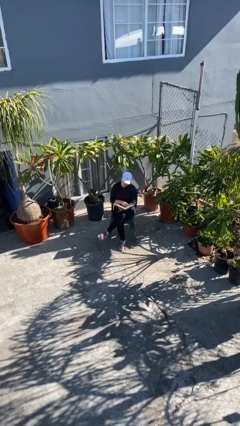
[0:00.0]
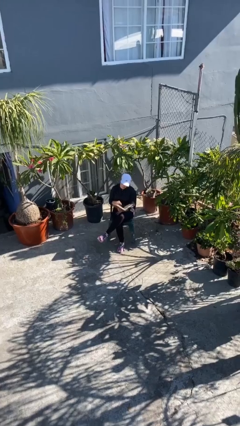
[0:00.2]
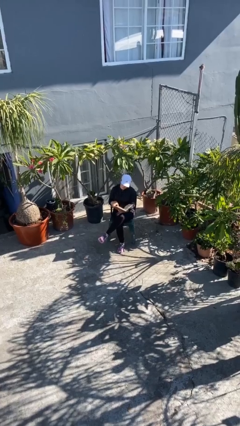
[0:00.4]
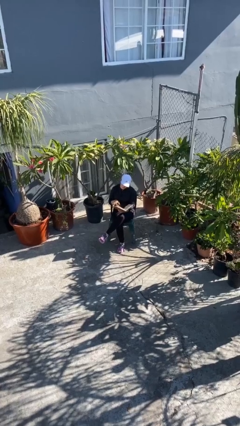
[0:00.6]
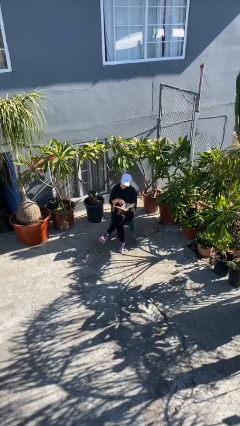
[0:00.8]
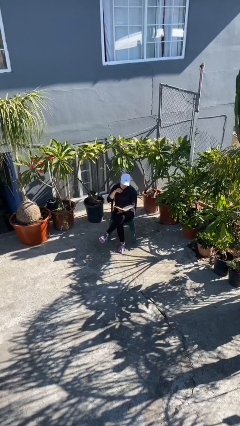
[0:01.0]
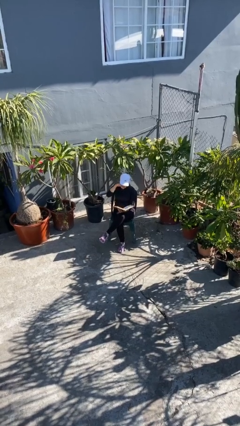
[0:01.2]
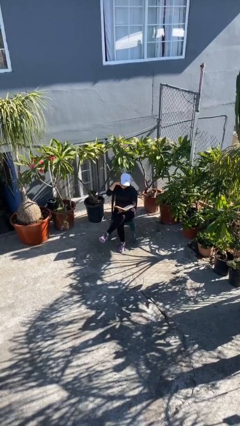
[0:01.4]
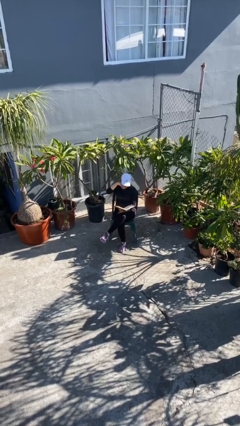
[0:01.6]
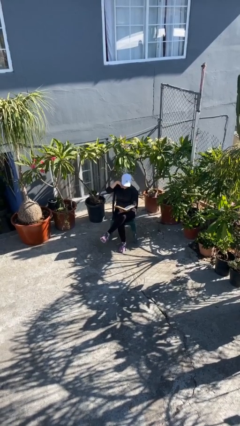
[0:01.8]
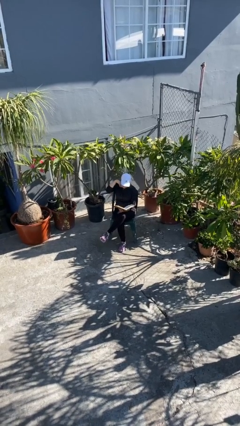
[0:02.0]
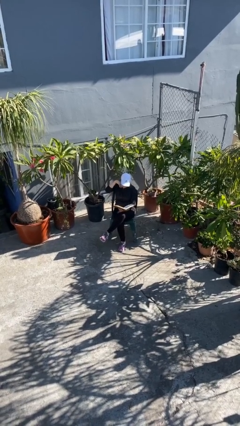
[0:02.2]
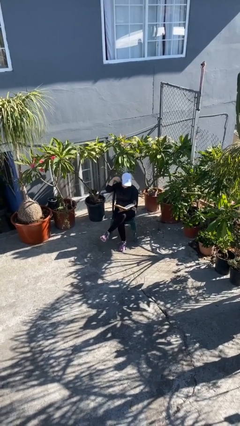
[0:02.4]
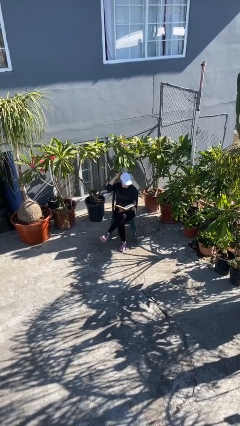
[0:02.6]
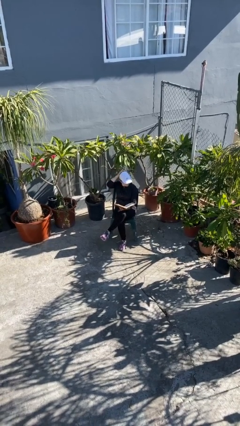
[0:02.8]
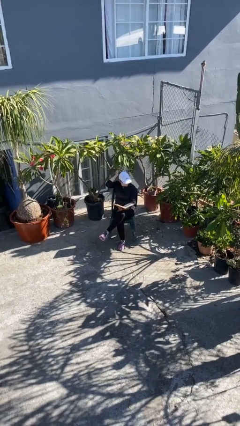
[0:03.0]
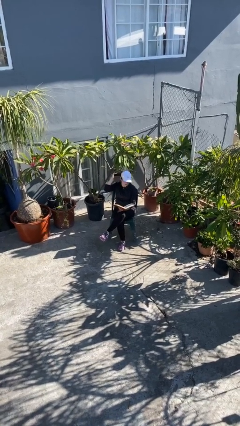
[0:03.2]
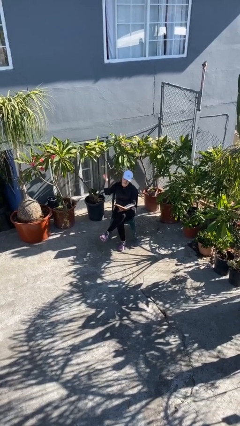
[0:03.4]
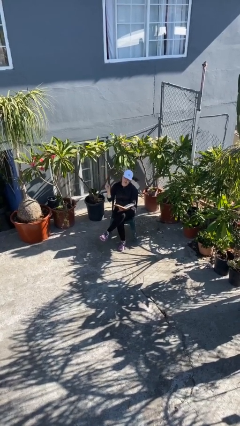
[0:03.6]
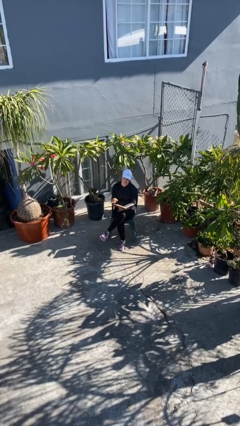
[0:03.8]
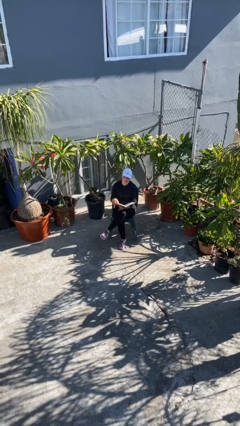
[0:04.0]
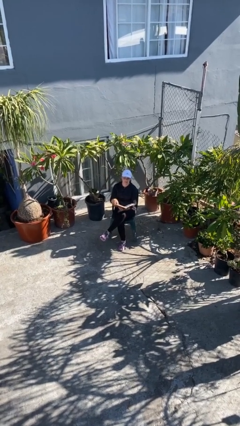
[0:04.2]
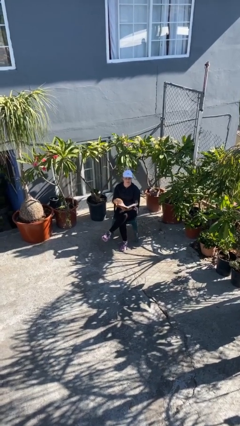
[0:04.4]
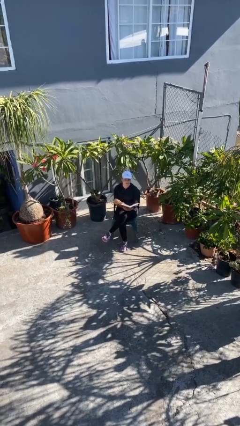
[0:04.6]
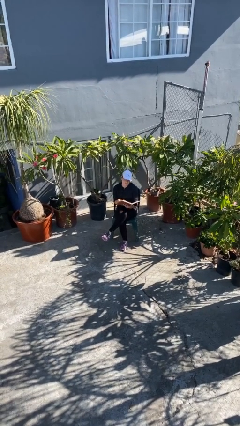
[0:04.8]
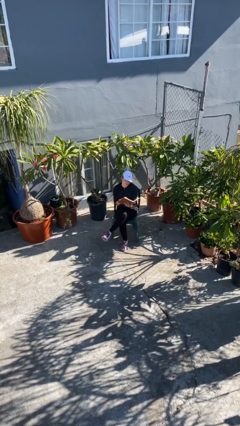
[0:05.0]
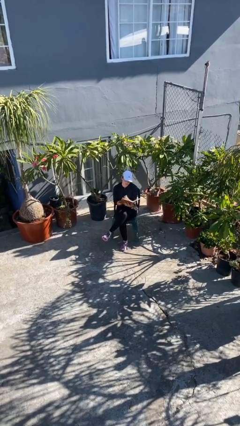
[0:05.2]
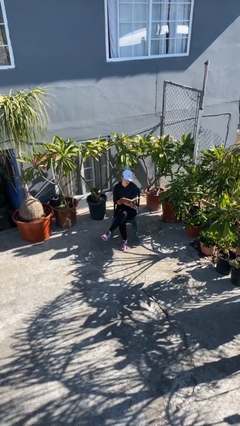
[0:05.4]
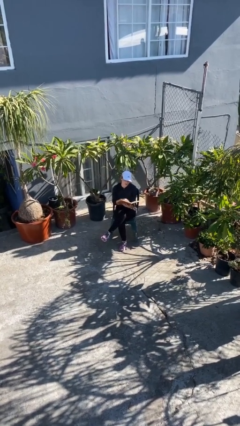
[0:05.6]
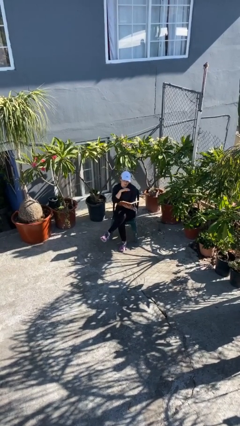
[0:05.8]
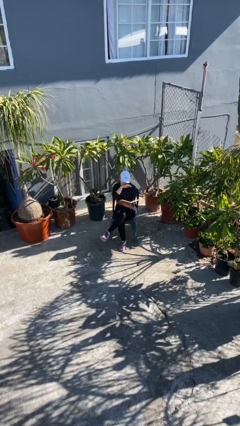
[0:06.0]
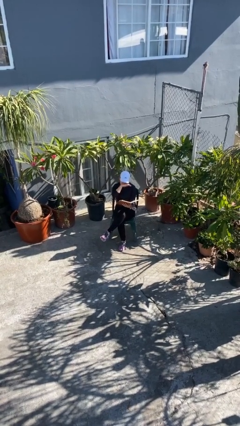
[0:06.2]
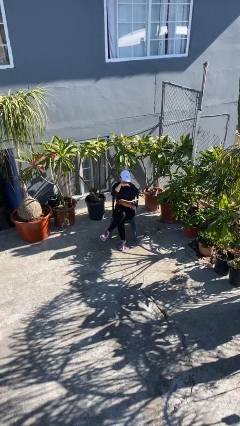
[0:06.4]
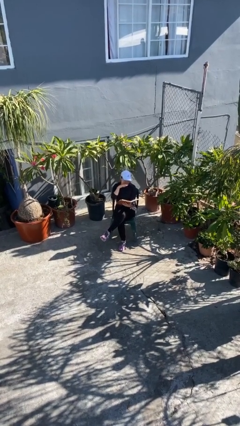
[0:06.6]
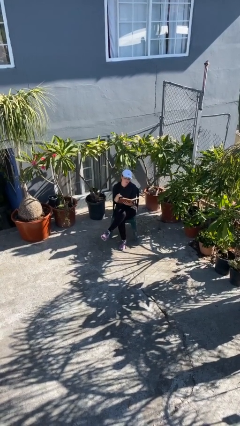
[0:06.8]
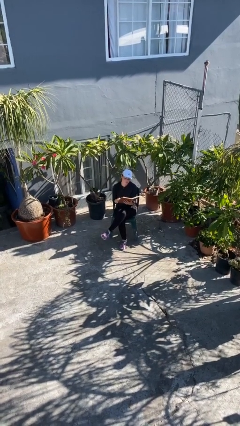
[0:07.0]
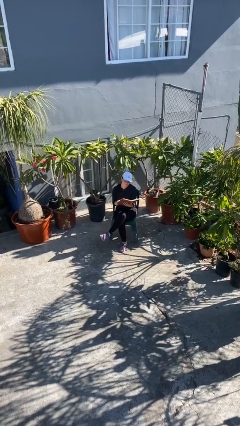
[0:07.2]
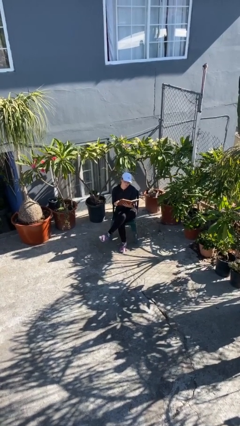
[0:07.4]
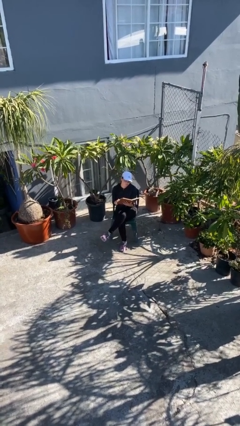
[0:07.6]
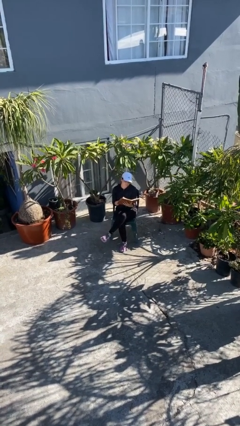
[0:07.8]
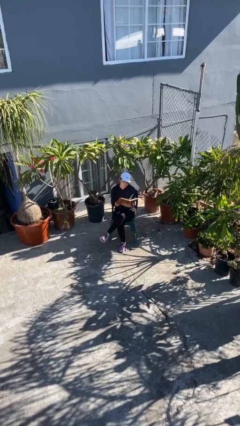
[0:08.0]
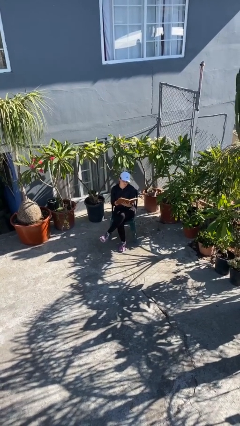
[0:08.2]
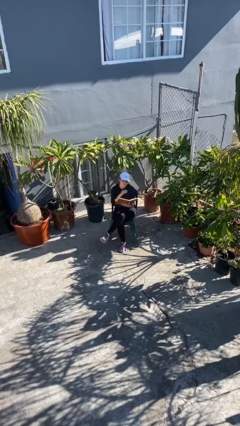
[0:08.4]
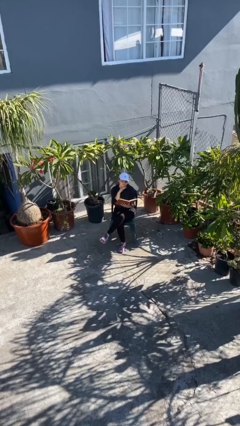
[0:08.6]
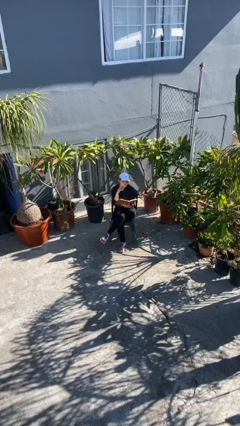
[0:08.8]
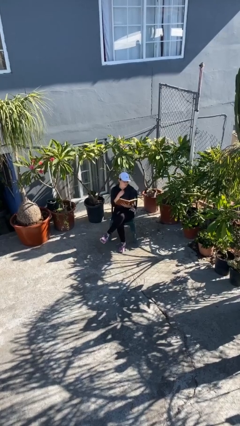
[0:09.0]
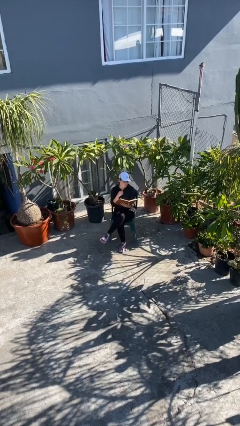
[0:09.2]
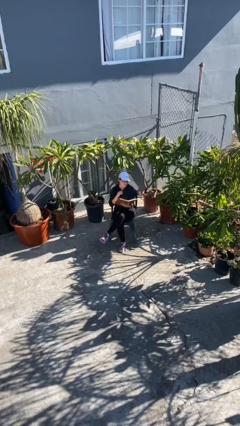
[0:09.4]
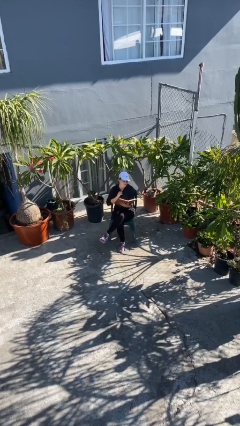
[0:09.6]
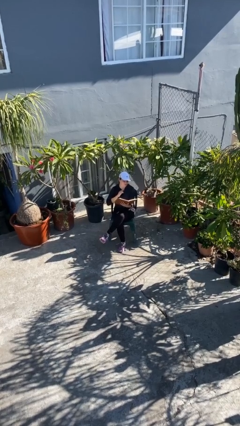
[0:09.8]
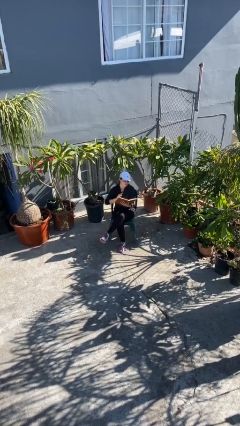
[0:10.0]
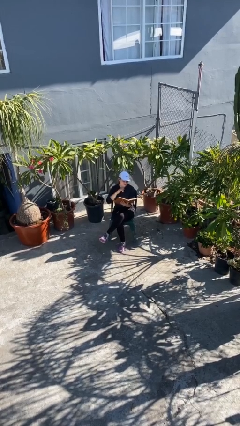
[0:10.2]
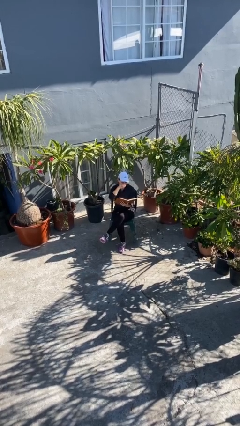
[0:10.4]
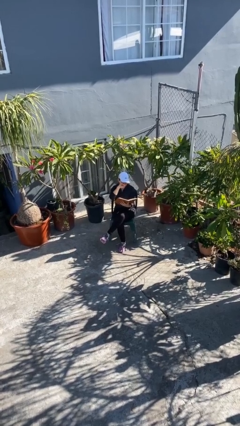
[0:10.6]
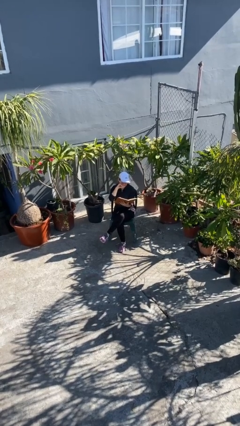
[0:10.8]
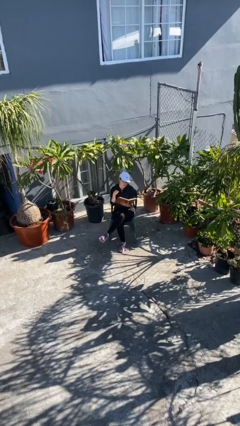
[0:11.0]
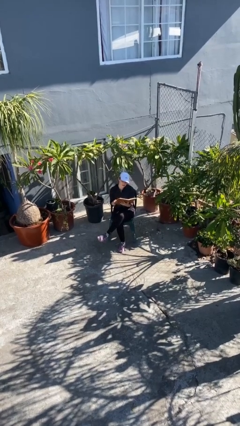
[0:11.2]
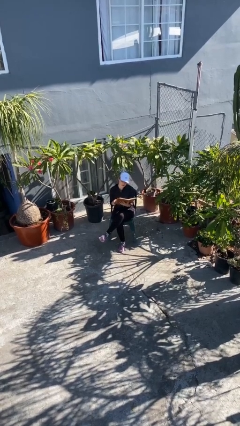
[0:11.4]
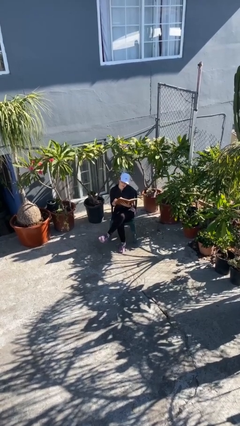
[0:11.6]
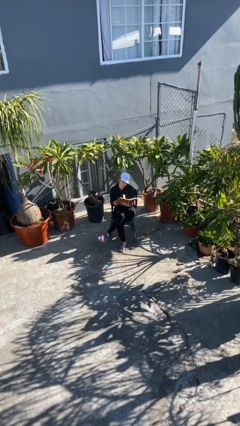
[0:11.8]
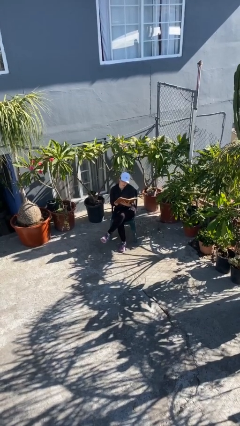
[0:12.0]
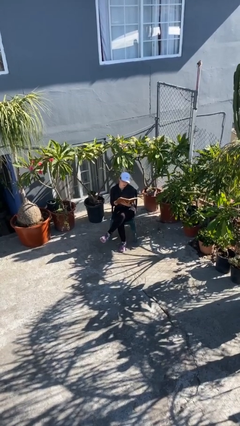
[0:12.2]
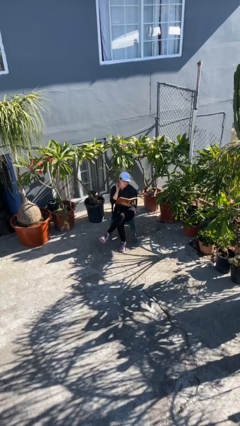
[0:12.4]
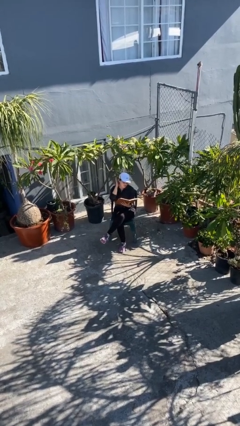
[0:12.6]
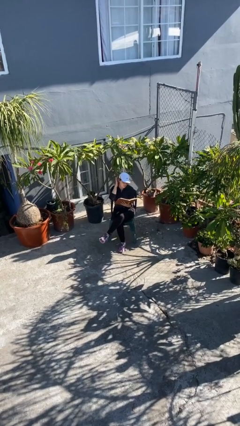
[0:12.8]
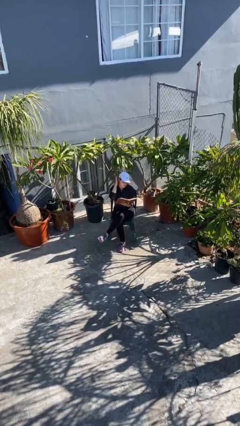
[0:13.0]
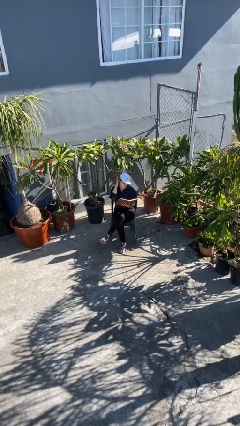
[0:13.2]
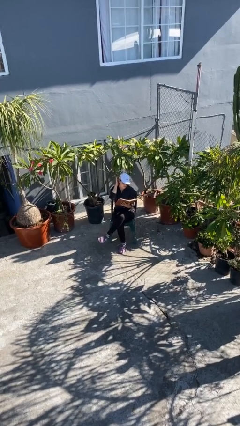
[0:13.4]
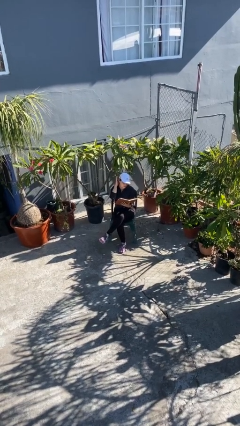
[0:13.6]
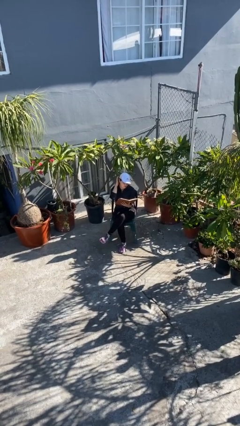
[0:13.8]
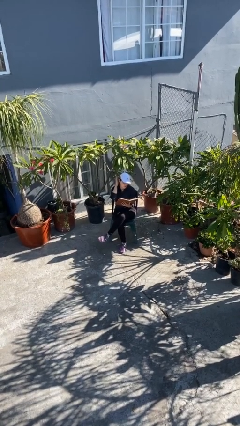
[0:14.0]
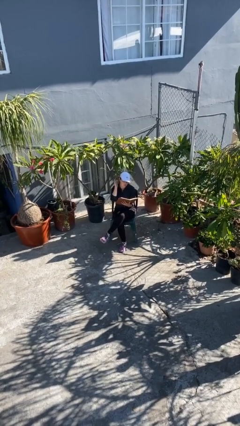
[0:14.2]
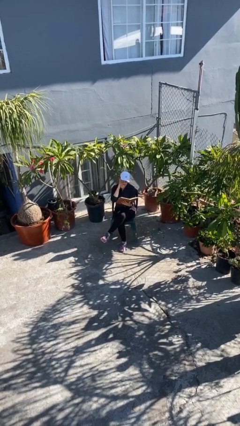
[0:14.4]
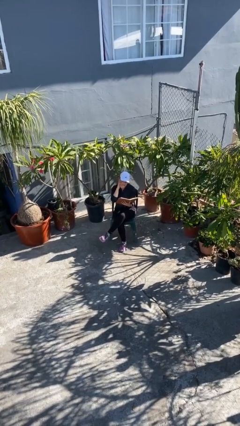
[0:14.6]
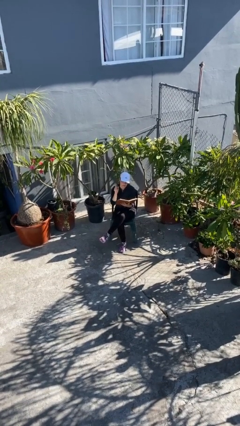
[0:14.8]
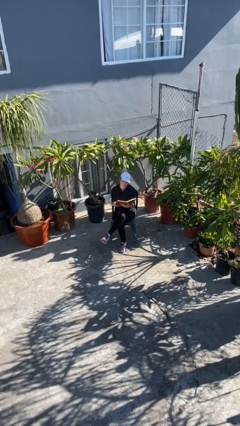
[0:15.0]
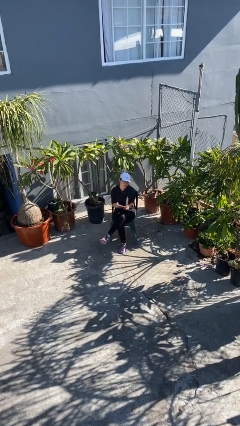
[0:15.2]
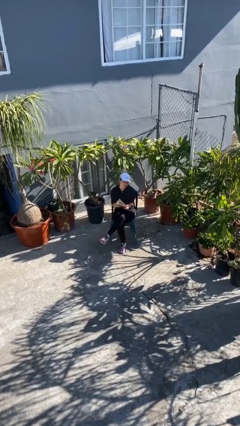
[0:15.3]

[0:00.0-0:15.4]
person reads document

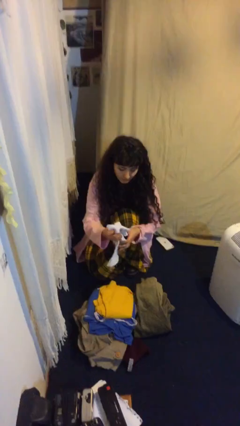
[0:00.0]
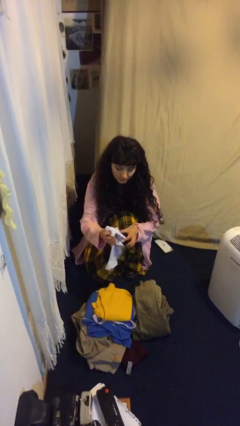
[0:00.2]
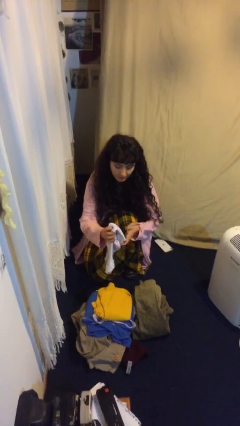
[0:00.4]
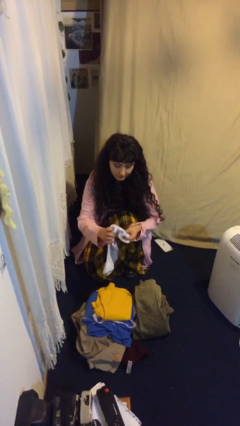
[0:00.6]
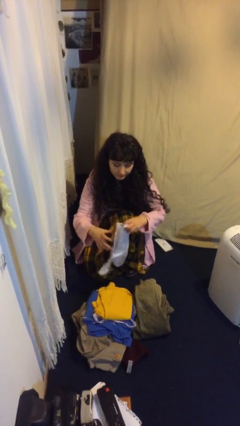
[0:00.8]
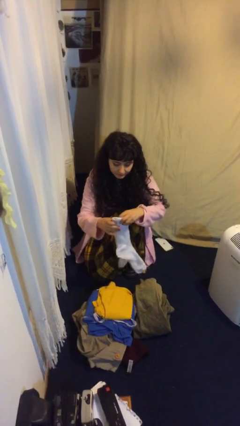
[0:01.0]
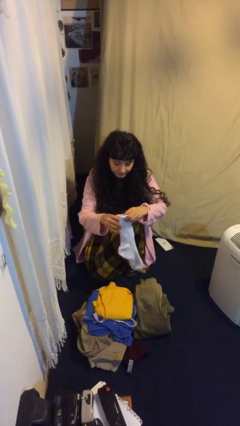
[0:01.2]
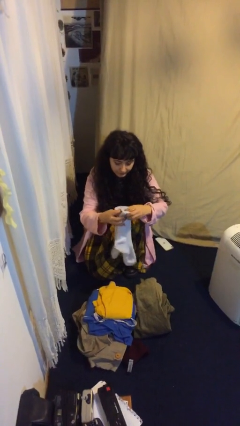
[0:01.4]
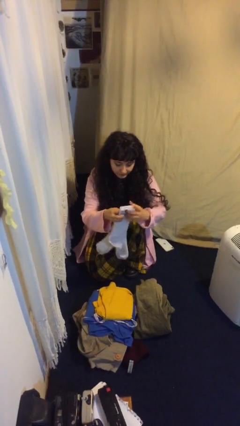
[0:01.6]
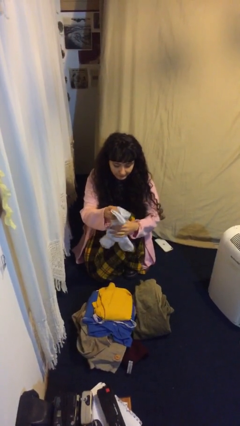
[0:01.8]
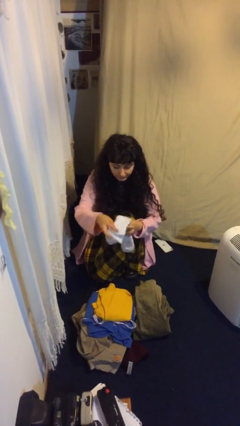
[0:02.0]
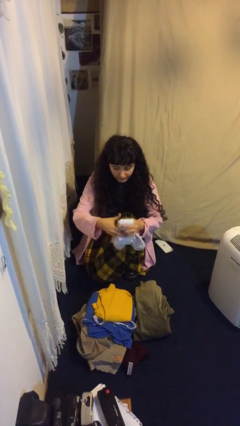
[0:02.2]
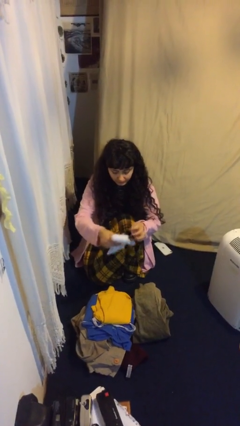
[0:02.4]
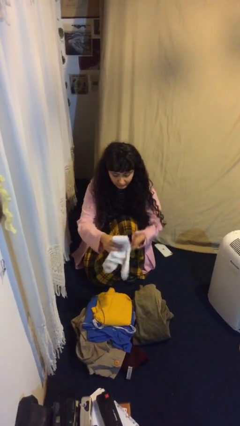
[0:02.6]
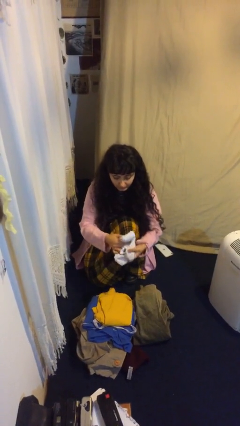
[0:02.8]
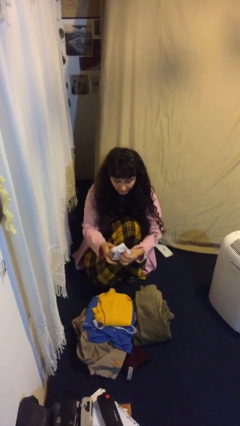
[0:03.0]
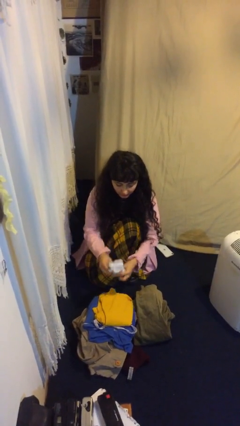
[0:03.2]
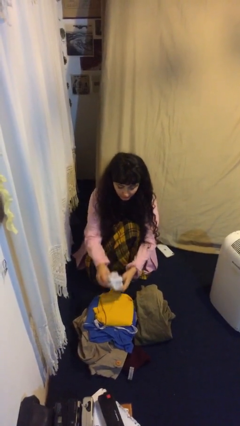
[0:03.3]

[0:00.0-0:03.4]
person folds socks
